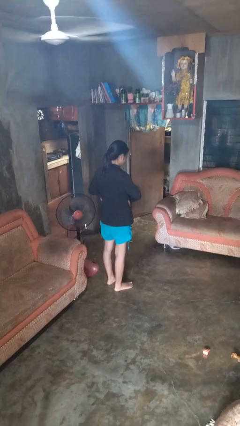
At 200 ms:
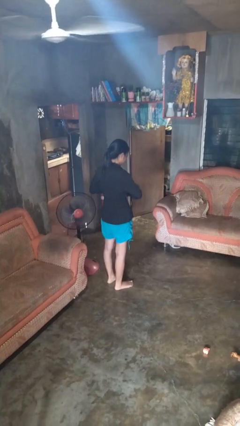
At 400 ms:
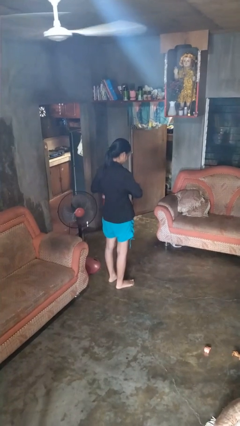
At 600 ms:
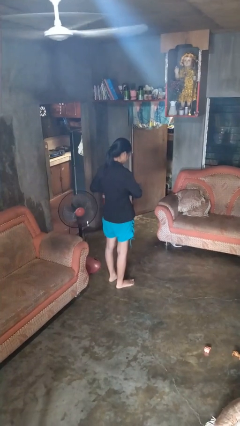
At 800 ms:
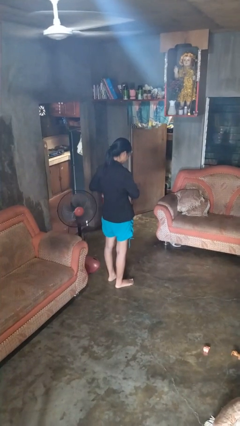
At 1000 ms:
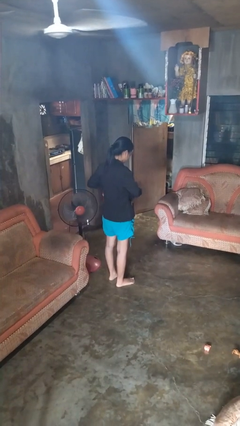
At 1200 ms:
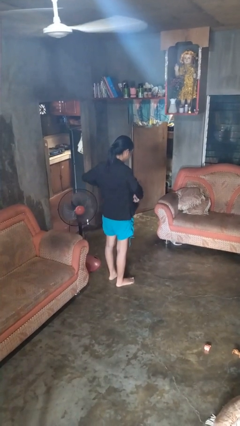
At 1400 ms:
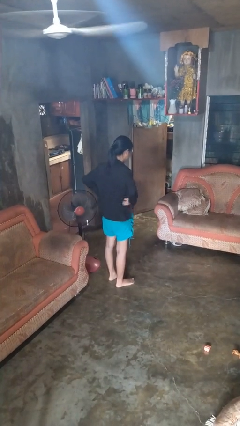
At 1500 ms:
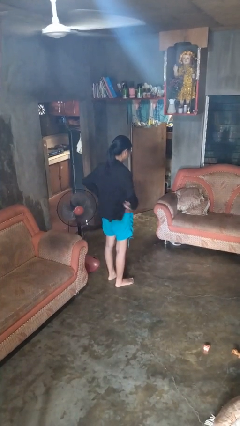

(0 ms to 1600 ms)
person unbuttons shirt

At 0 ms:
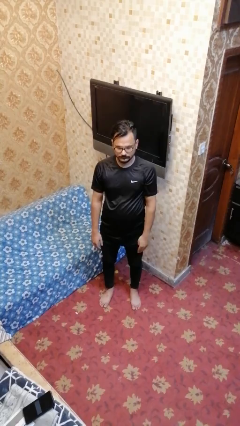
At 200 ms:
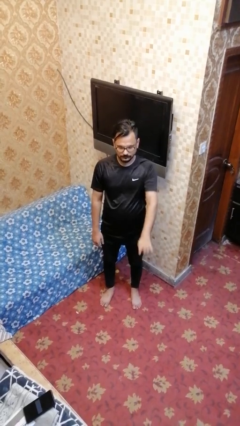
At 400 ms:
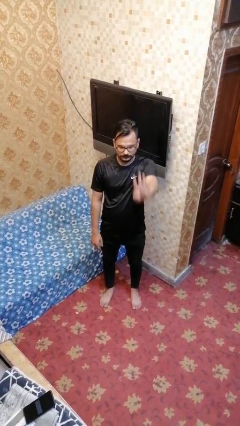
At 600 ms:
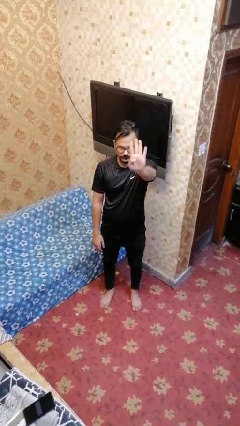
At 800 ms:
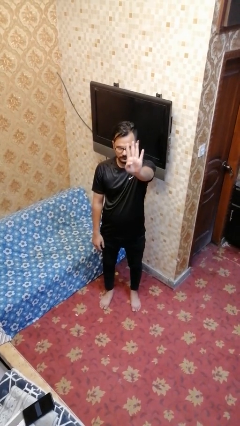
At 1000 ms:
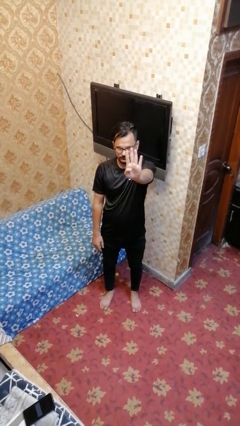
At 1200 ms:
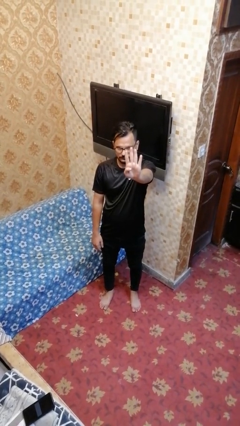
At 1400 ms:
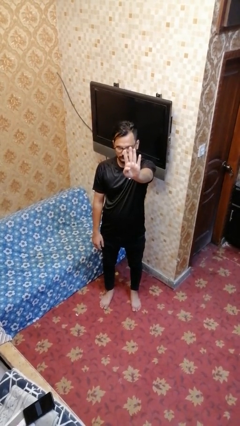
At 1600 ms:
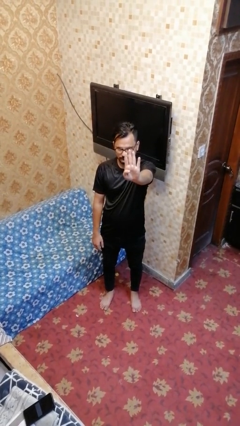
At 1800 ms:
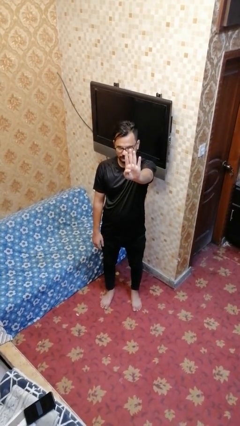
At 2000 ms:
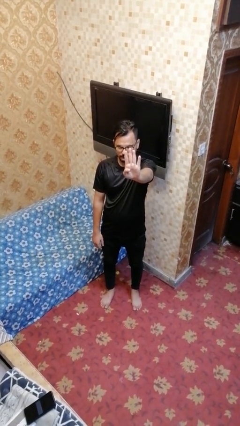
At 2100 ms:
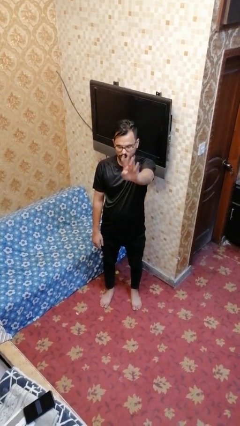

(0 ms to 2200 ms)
person gestures number four

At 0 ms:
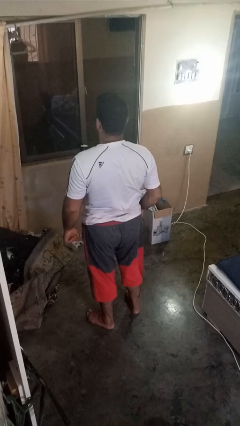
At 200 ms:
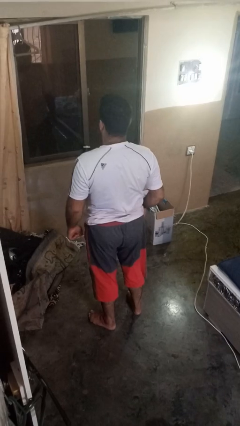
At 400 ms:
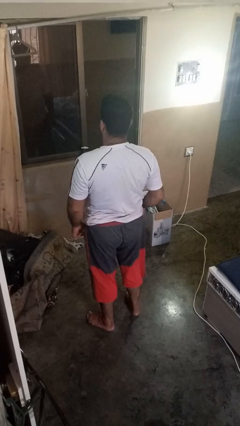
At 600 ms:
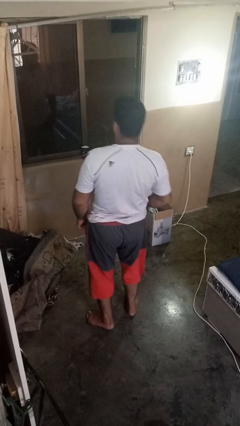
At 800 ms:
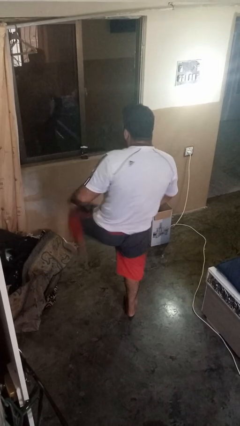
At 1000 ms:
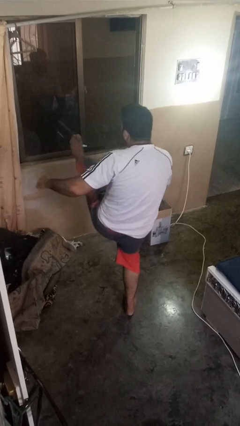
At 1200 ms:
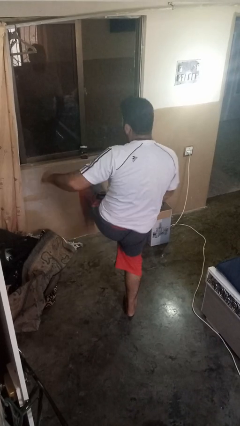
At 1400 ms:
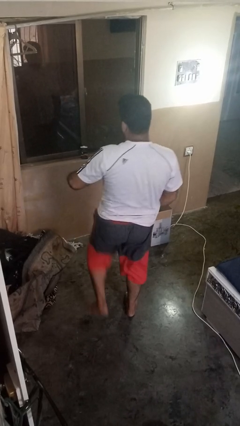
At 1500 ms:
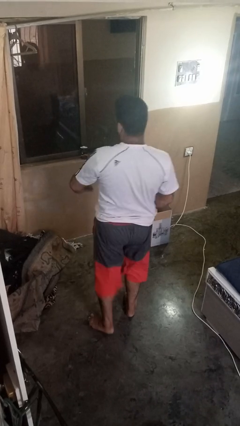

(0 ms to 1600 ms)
person karate kicks

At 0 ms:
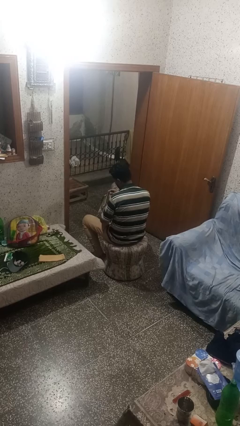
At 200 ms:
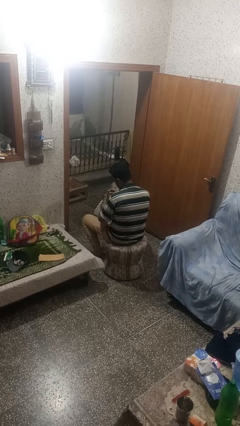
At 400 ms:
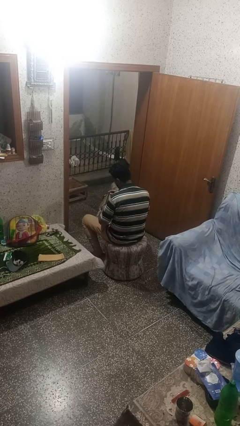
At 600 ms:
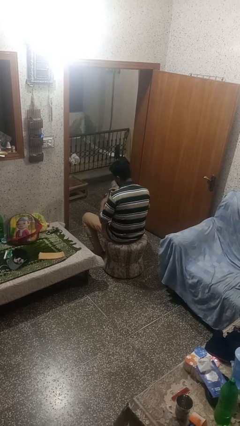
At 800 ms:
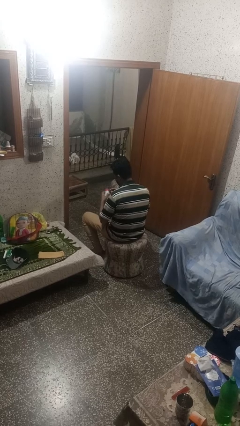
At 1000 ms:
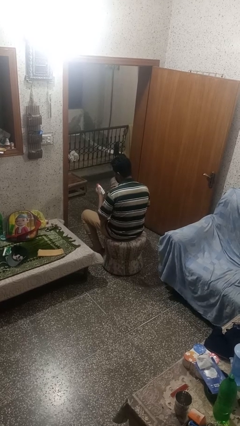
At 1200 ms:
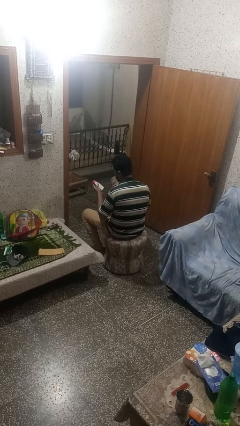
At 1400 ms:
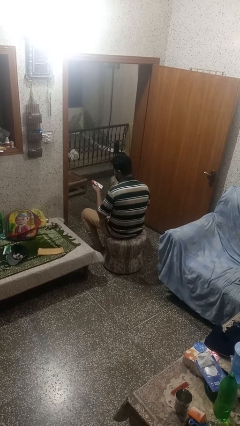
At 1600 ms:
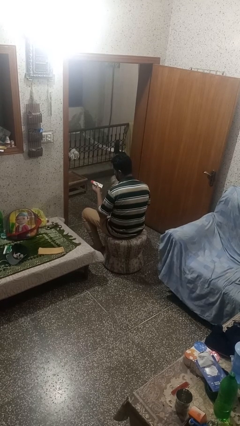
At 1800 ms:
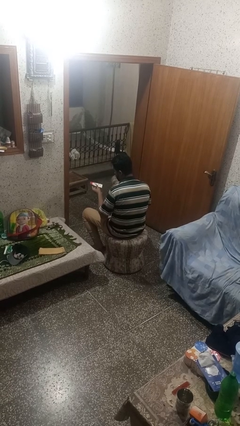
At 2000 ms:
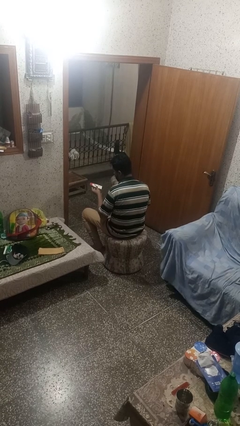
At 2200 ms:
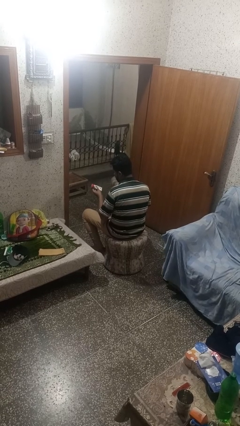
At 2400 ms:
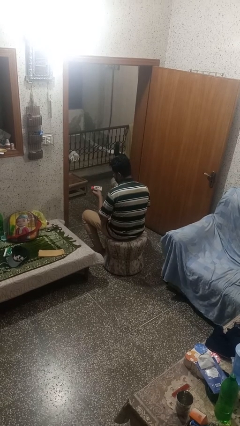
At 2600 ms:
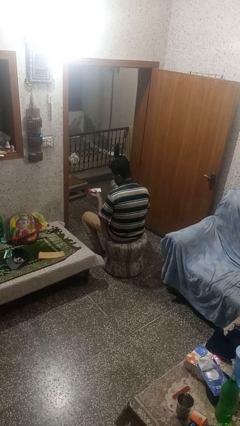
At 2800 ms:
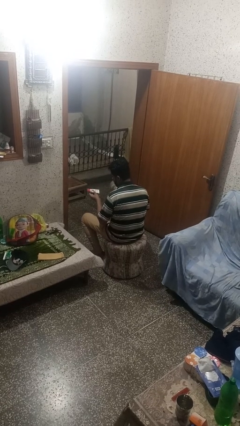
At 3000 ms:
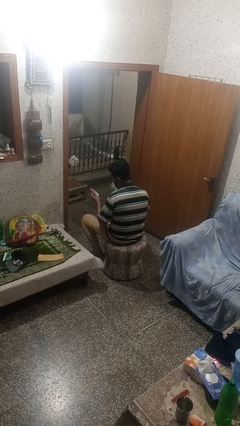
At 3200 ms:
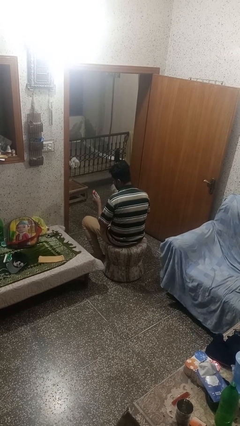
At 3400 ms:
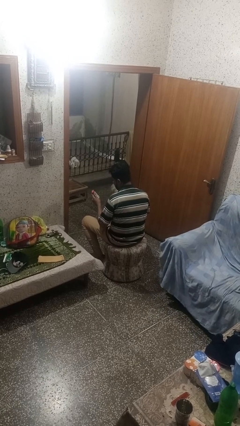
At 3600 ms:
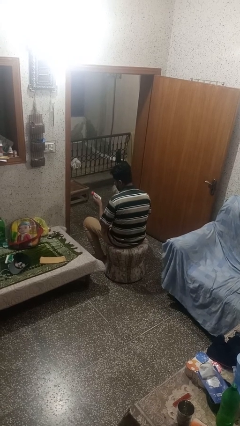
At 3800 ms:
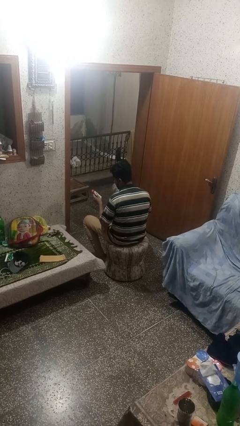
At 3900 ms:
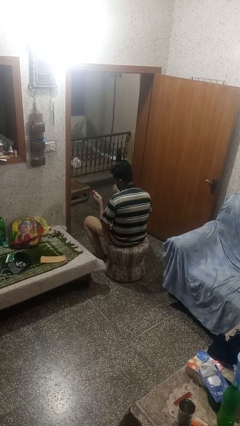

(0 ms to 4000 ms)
person takes object from purse

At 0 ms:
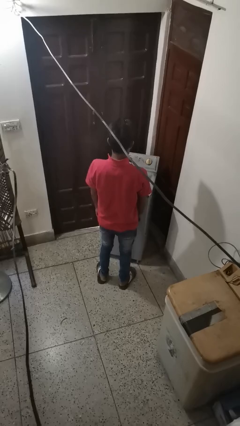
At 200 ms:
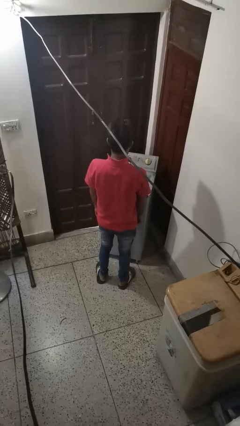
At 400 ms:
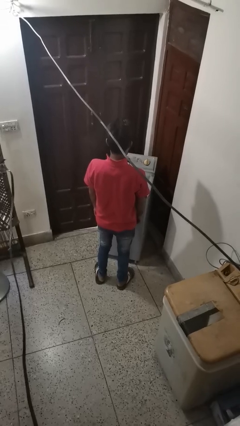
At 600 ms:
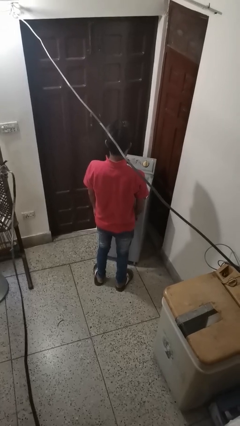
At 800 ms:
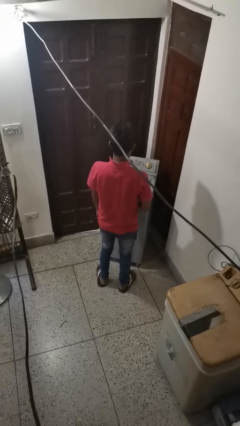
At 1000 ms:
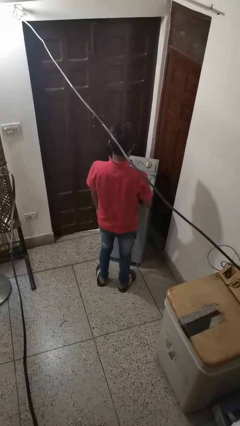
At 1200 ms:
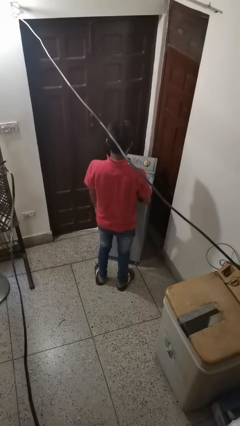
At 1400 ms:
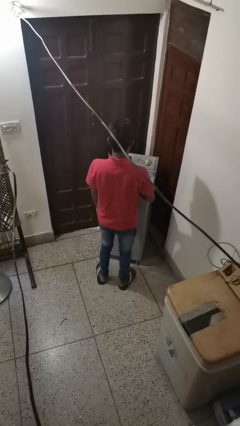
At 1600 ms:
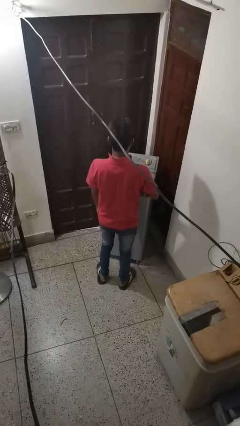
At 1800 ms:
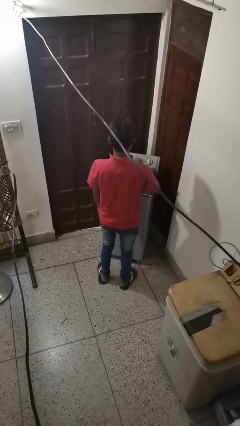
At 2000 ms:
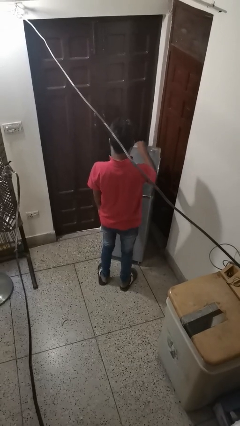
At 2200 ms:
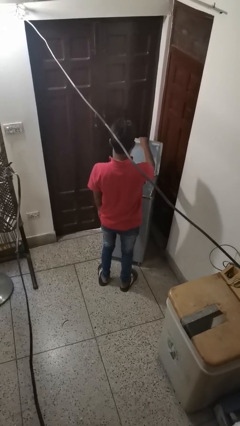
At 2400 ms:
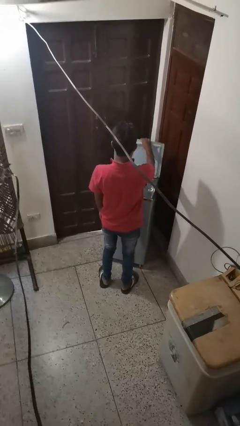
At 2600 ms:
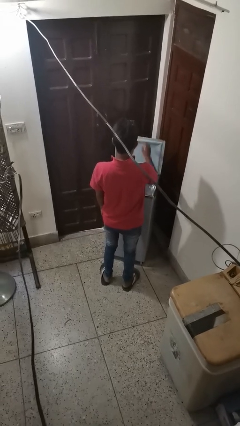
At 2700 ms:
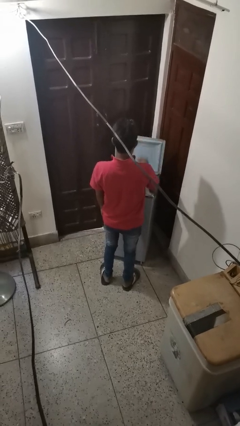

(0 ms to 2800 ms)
person opens clothes washer

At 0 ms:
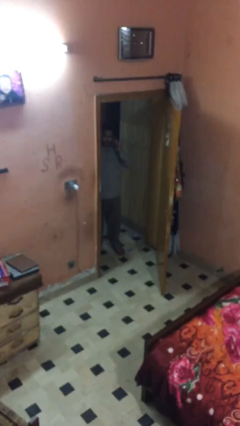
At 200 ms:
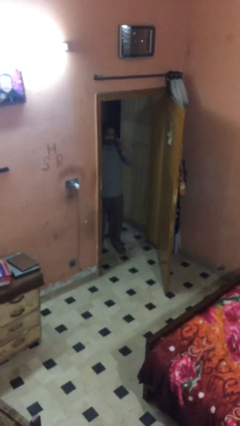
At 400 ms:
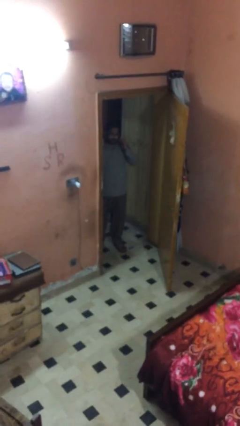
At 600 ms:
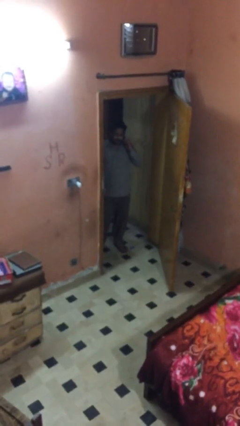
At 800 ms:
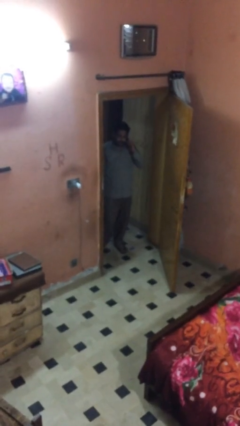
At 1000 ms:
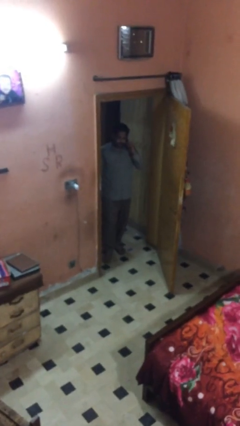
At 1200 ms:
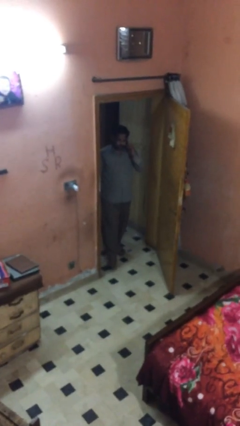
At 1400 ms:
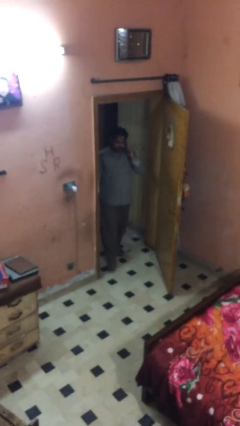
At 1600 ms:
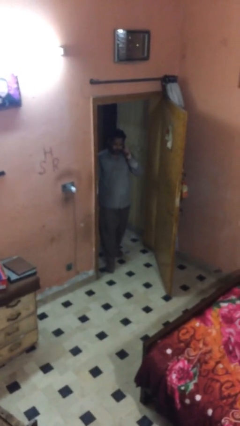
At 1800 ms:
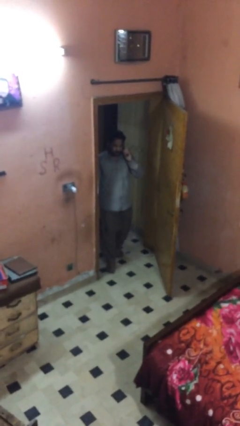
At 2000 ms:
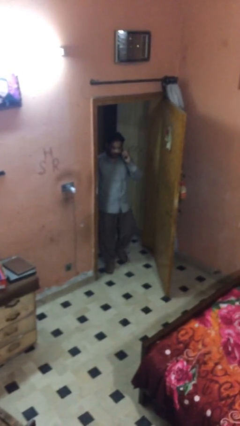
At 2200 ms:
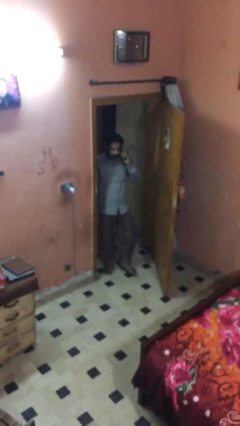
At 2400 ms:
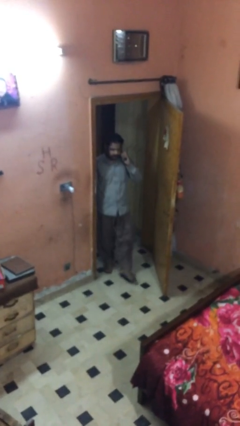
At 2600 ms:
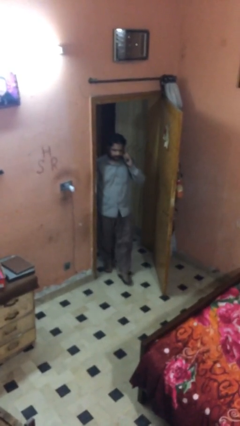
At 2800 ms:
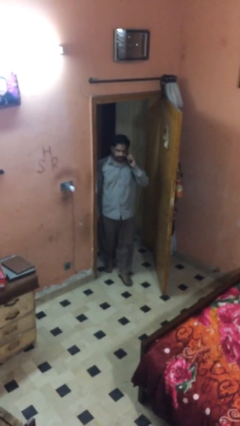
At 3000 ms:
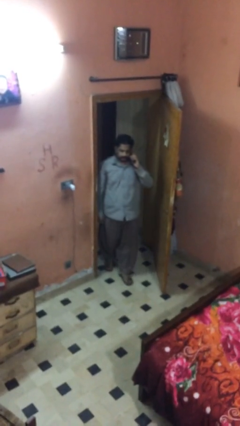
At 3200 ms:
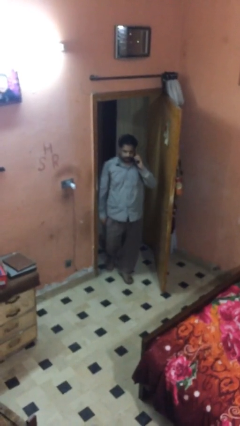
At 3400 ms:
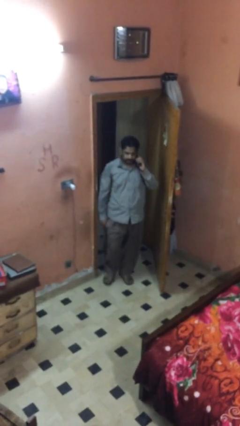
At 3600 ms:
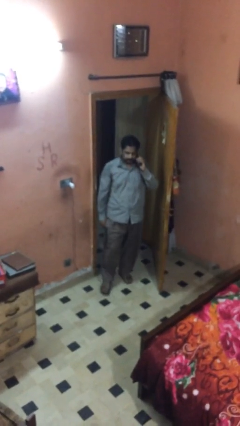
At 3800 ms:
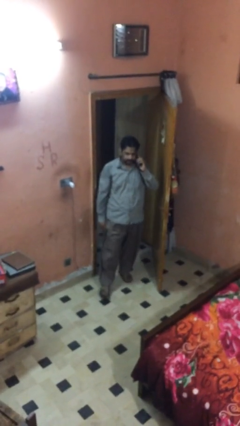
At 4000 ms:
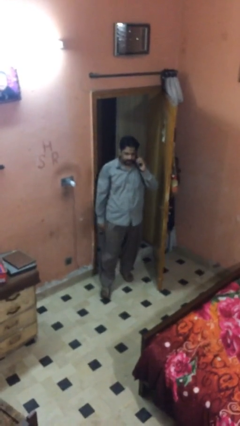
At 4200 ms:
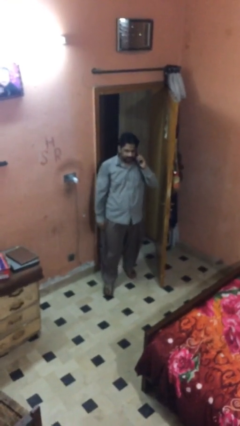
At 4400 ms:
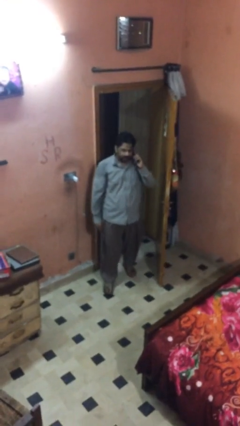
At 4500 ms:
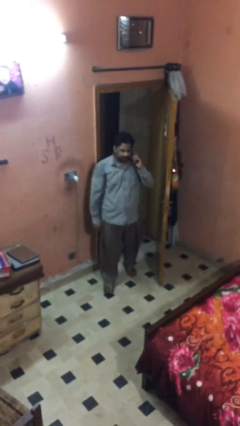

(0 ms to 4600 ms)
person enters scene through structure

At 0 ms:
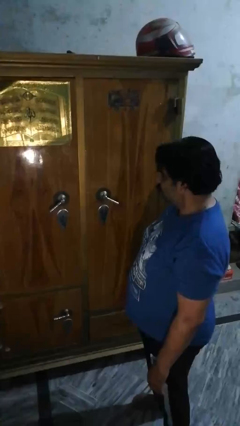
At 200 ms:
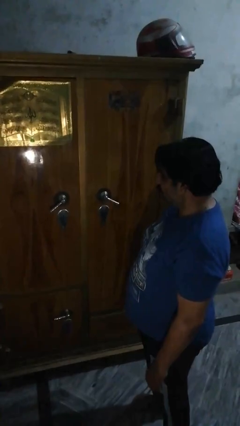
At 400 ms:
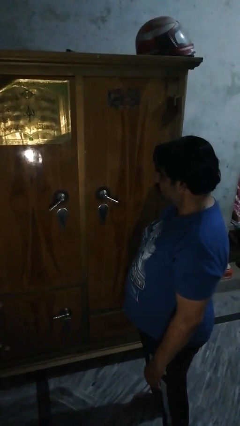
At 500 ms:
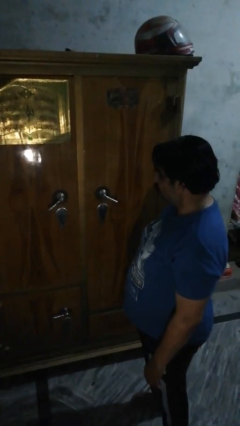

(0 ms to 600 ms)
person closes closet door
